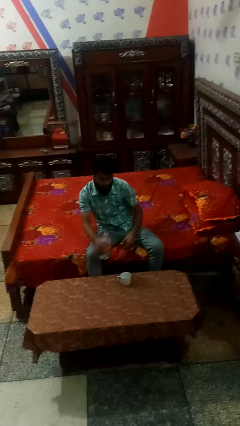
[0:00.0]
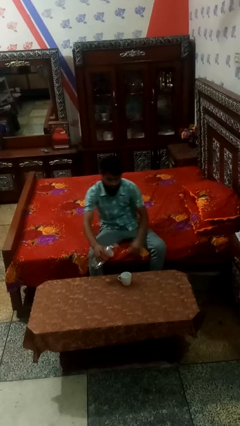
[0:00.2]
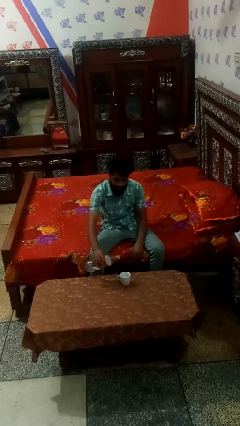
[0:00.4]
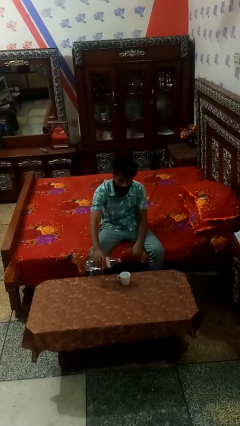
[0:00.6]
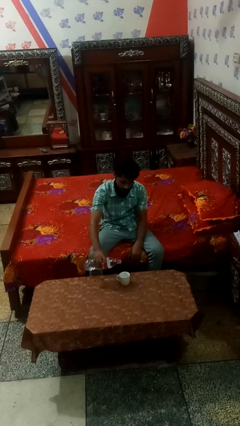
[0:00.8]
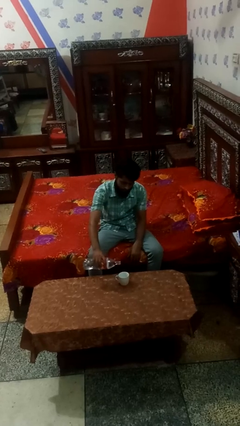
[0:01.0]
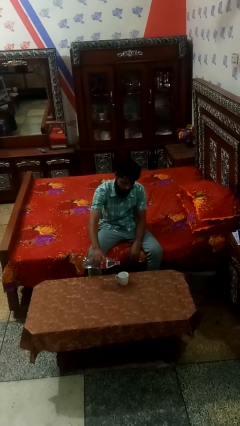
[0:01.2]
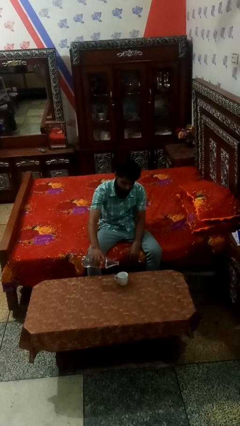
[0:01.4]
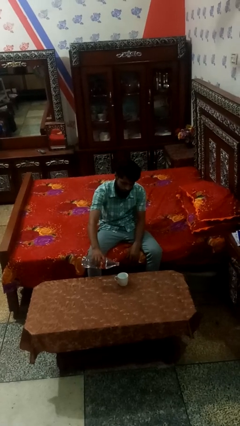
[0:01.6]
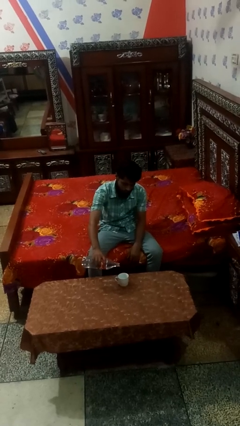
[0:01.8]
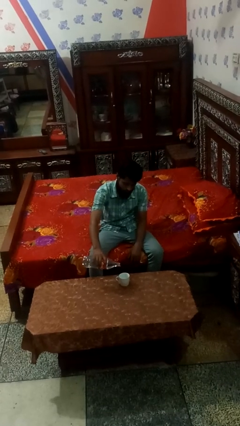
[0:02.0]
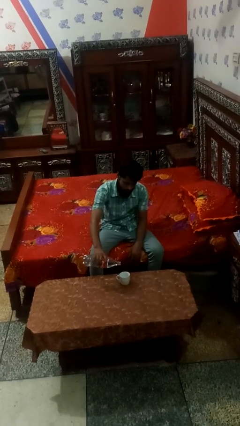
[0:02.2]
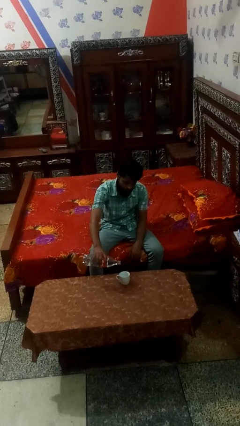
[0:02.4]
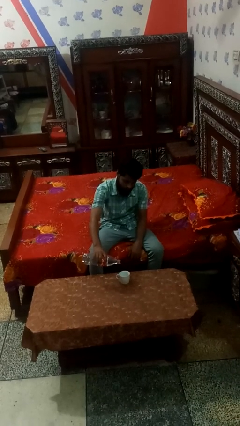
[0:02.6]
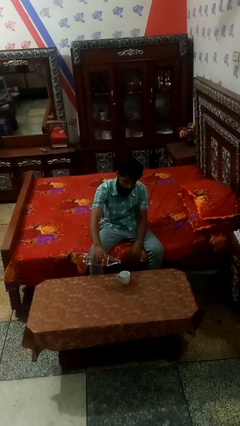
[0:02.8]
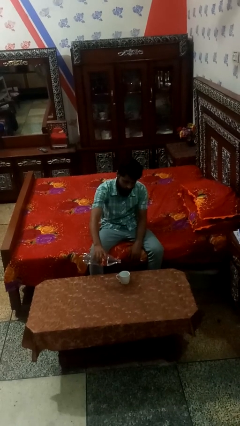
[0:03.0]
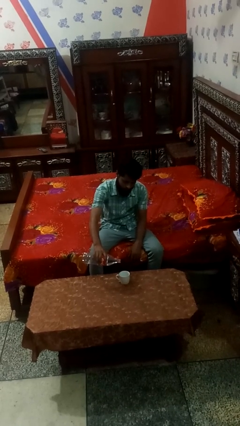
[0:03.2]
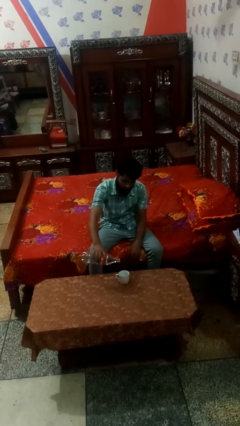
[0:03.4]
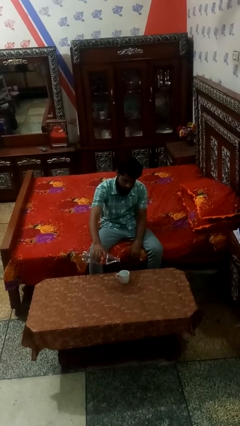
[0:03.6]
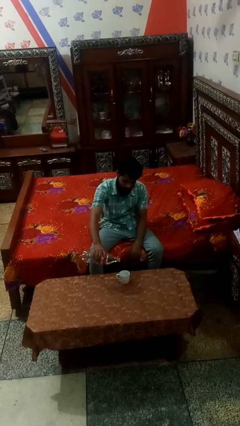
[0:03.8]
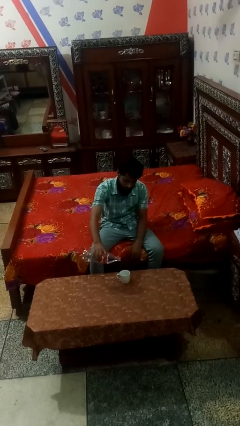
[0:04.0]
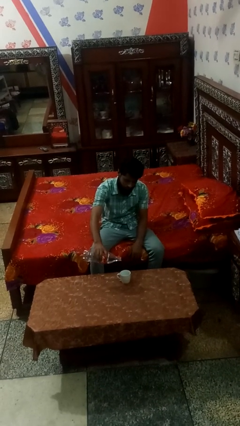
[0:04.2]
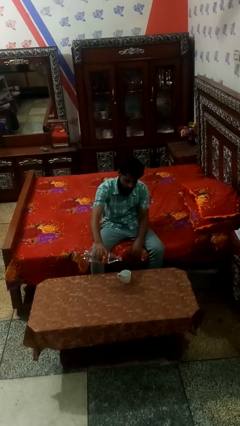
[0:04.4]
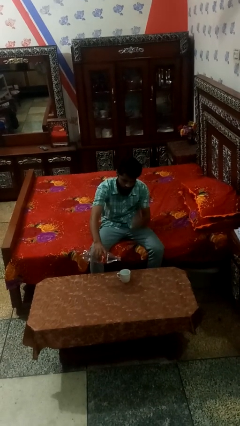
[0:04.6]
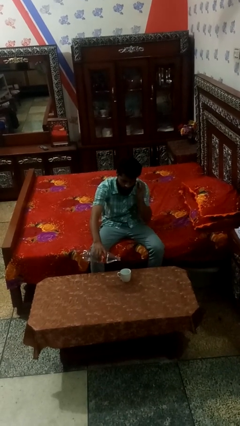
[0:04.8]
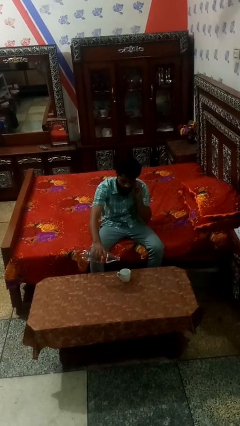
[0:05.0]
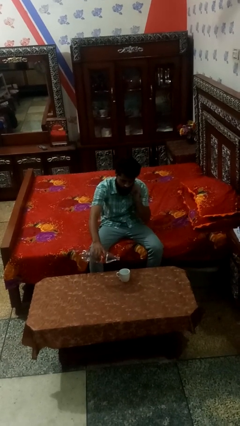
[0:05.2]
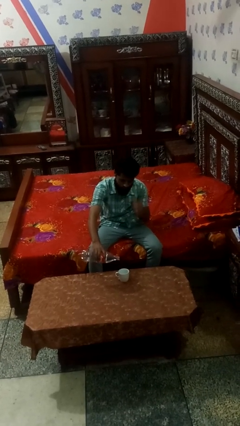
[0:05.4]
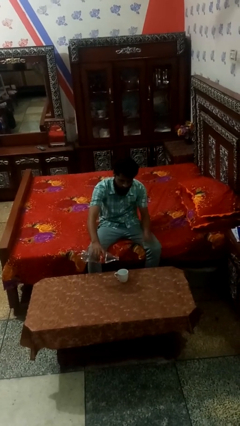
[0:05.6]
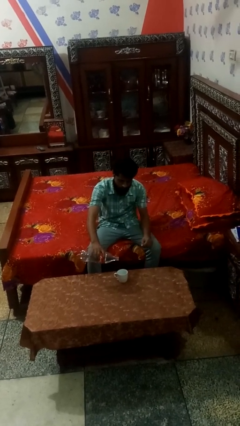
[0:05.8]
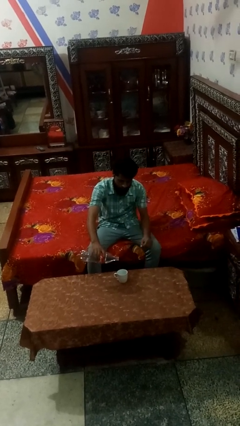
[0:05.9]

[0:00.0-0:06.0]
person pours liquid into cup

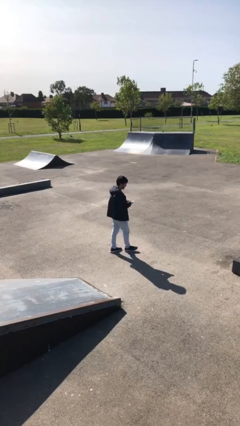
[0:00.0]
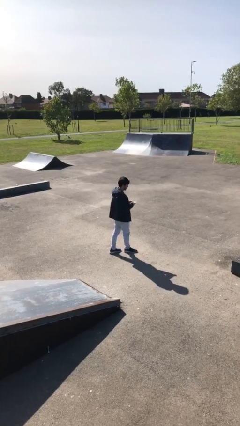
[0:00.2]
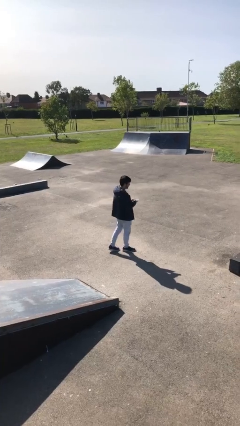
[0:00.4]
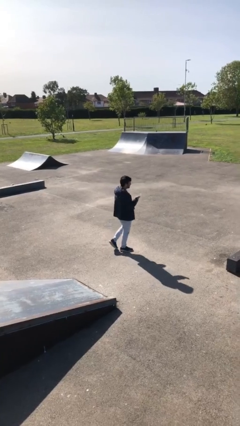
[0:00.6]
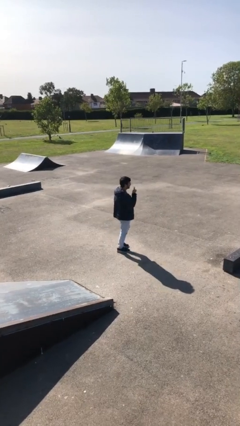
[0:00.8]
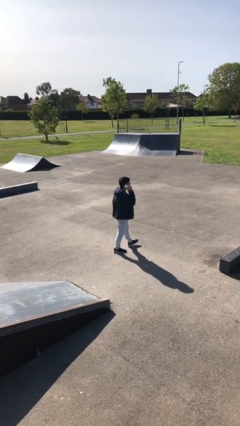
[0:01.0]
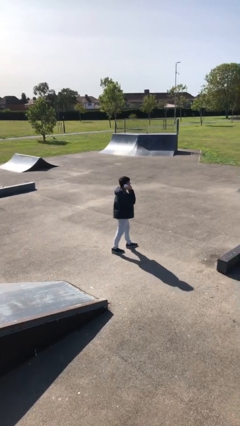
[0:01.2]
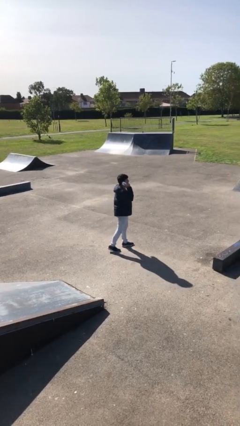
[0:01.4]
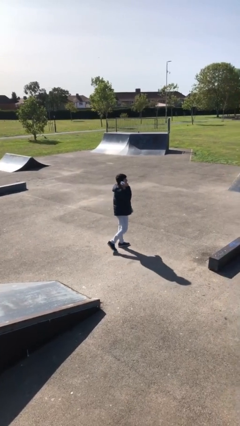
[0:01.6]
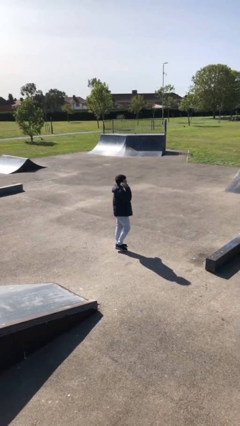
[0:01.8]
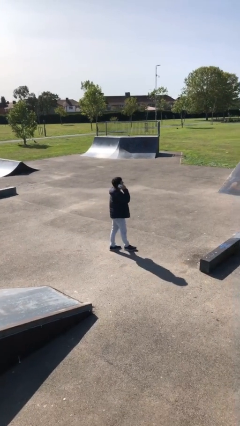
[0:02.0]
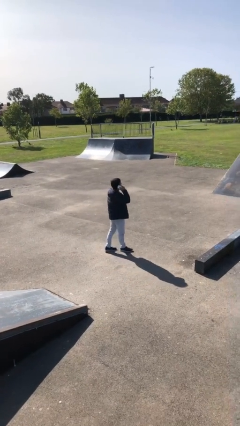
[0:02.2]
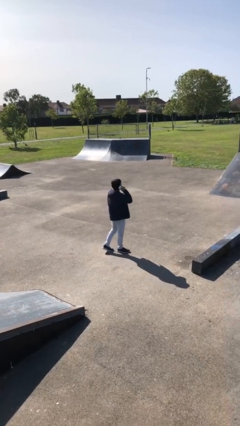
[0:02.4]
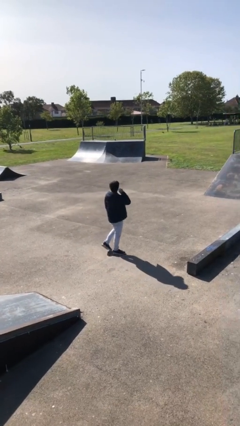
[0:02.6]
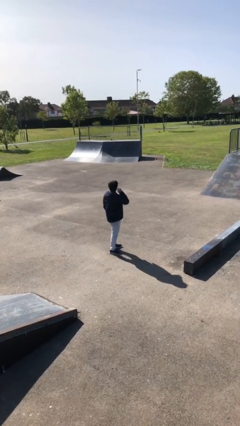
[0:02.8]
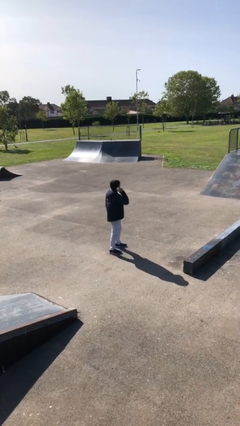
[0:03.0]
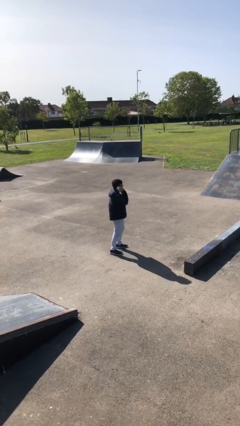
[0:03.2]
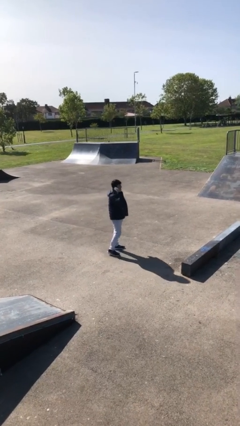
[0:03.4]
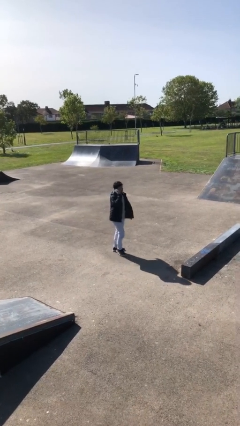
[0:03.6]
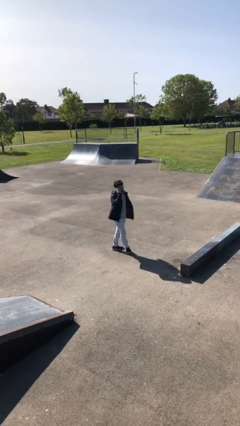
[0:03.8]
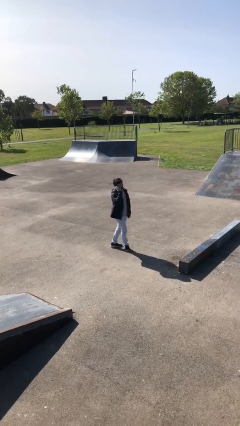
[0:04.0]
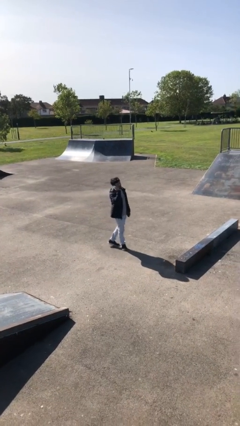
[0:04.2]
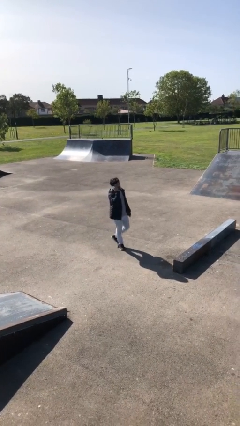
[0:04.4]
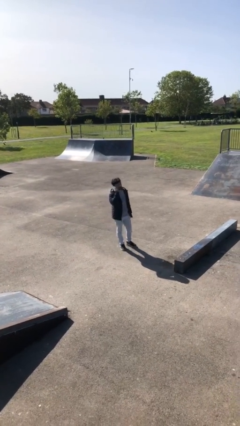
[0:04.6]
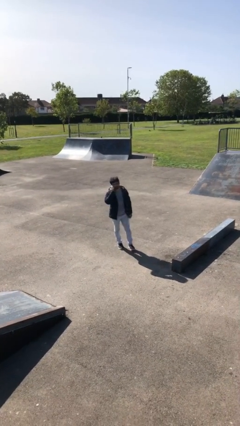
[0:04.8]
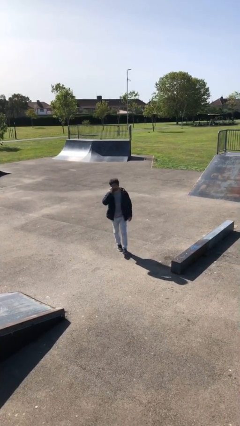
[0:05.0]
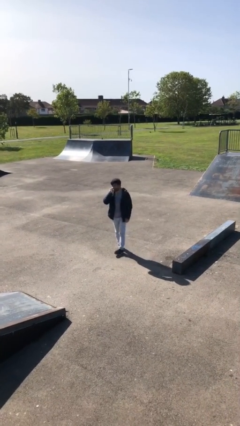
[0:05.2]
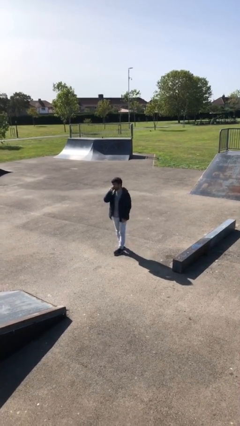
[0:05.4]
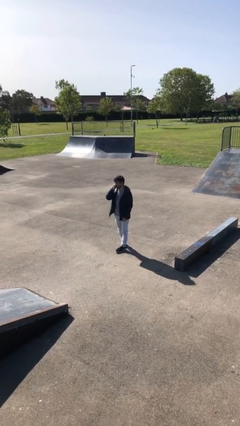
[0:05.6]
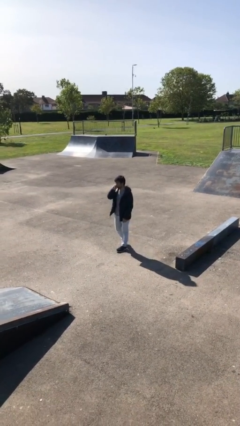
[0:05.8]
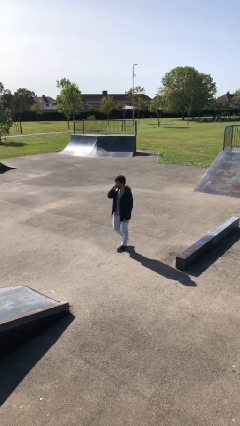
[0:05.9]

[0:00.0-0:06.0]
person talks on phone

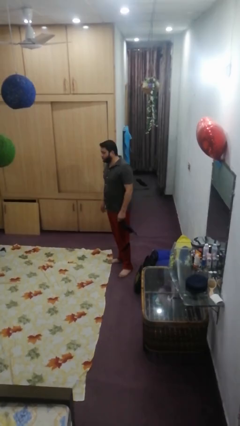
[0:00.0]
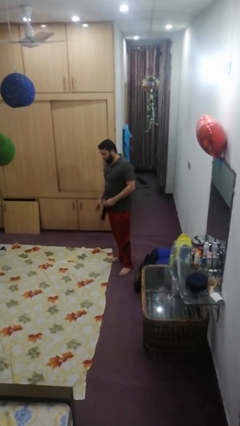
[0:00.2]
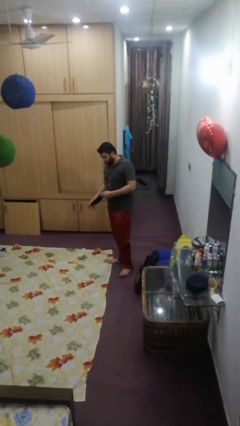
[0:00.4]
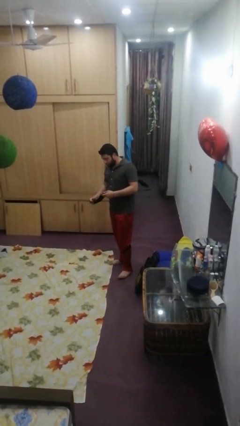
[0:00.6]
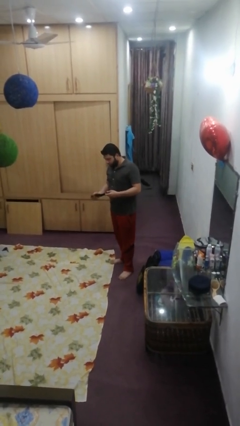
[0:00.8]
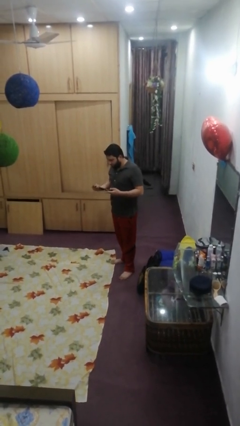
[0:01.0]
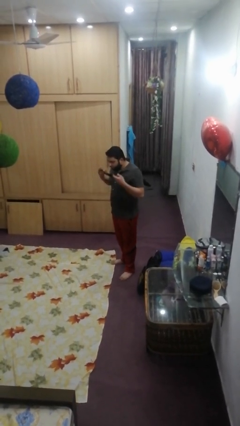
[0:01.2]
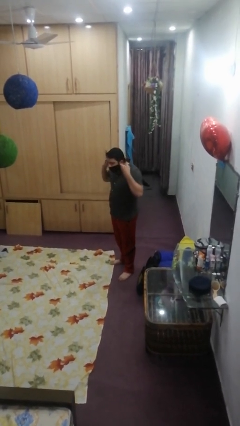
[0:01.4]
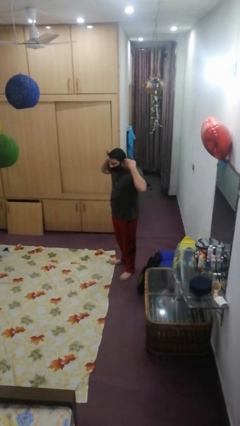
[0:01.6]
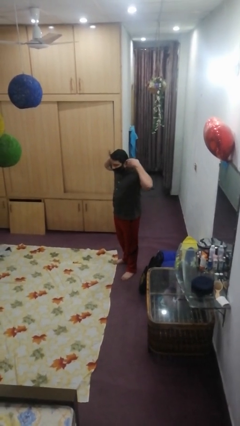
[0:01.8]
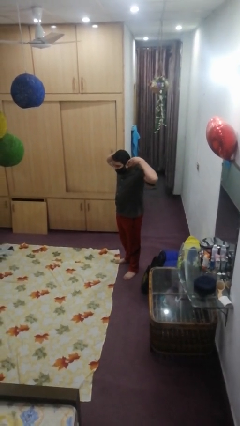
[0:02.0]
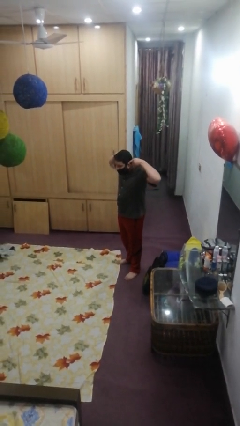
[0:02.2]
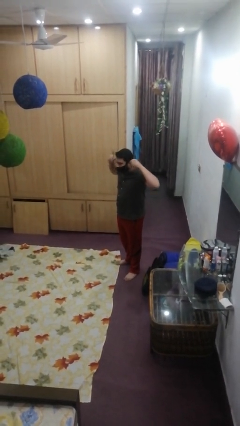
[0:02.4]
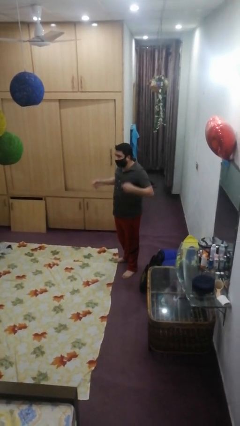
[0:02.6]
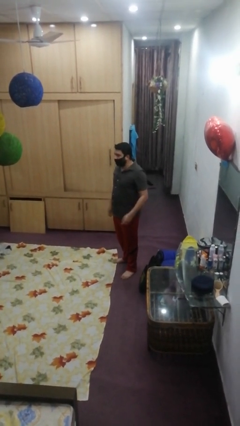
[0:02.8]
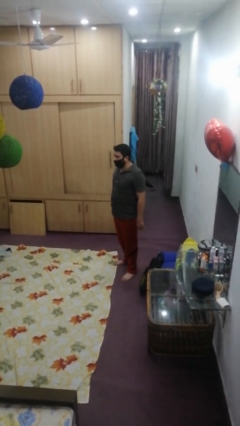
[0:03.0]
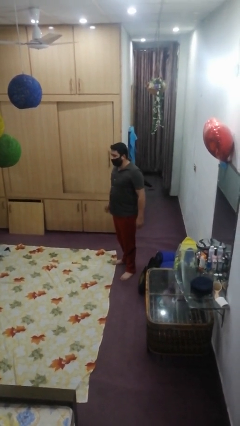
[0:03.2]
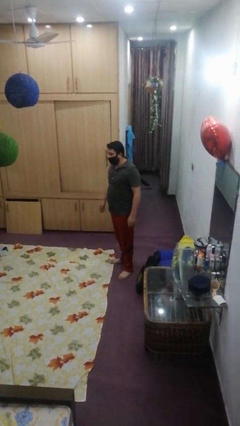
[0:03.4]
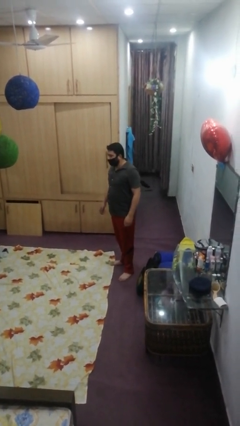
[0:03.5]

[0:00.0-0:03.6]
person puts on facemask

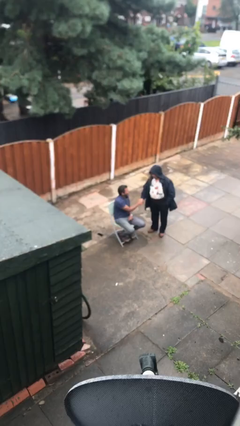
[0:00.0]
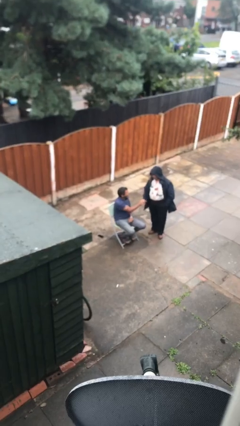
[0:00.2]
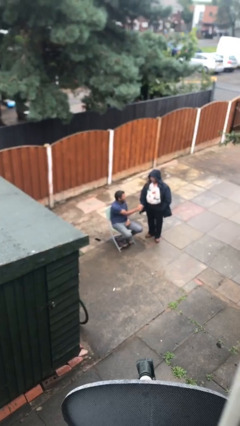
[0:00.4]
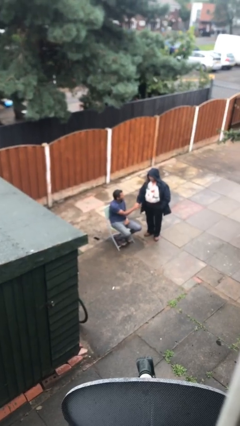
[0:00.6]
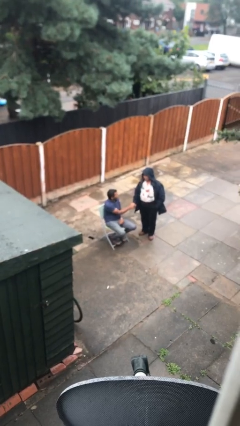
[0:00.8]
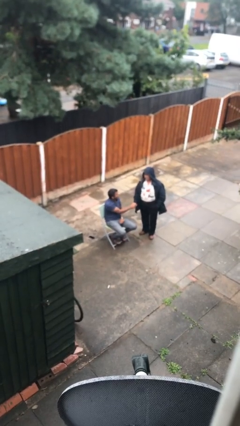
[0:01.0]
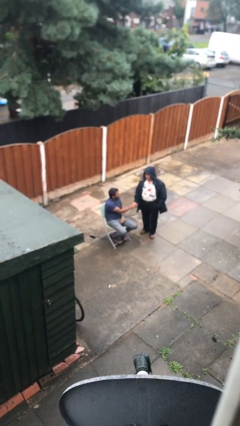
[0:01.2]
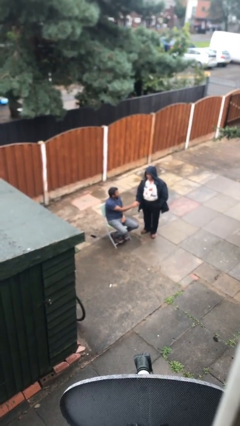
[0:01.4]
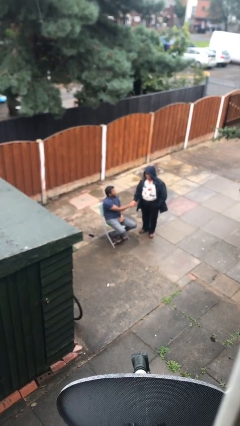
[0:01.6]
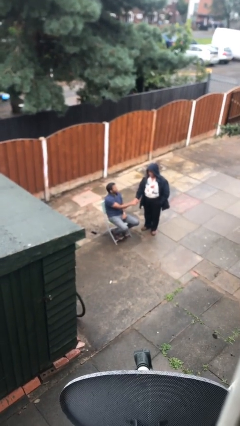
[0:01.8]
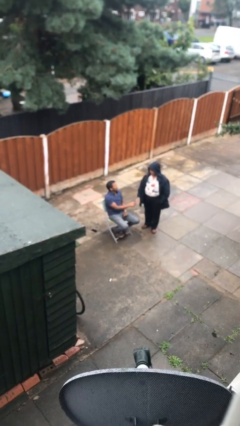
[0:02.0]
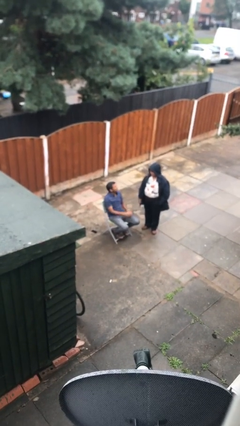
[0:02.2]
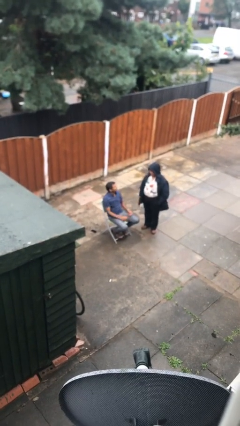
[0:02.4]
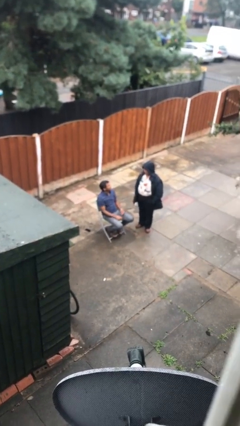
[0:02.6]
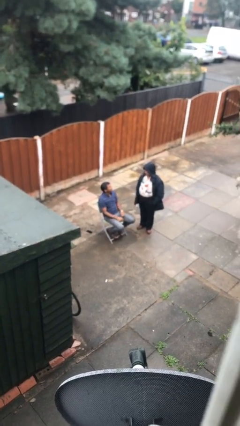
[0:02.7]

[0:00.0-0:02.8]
person shakes hand
